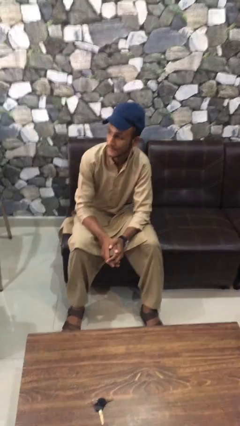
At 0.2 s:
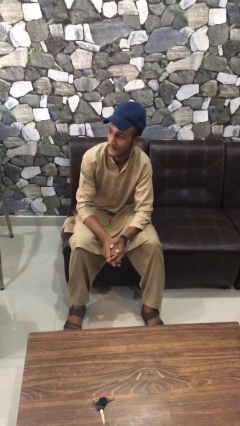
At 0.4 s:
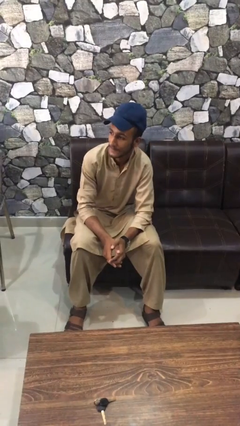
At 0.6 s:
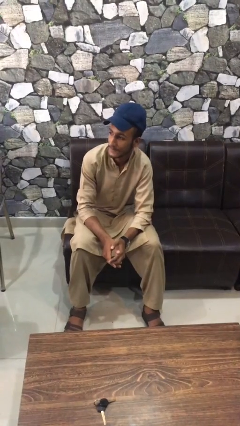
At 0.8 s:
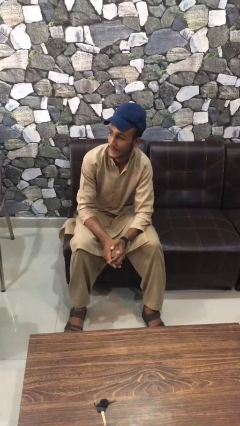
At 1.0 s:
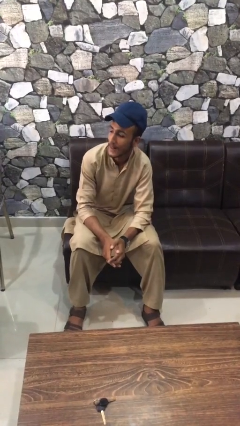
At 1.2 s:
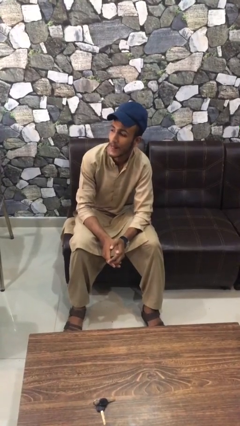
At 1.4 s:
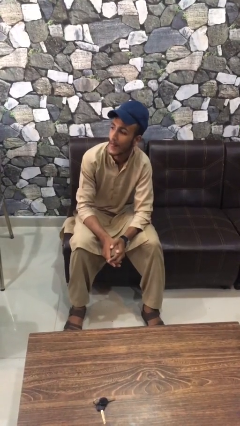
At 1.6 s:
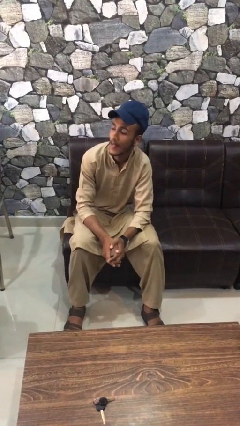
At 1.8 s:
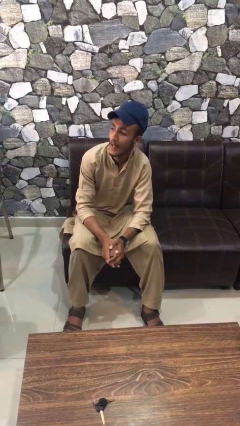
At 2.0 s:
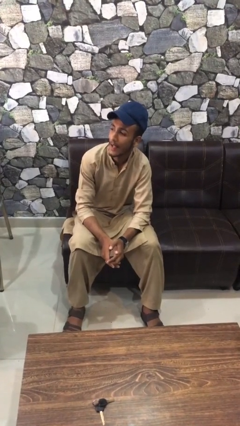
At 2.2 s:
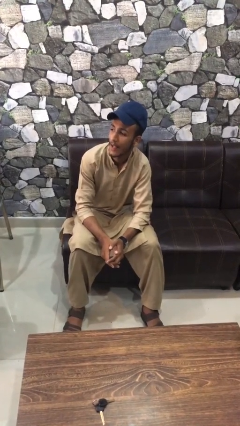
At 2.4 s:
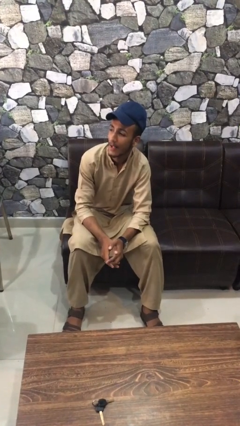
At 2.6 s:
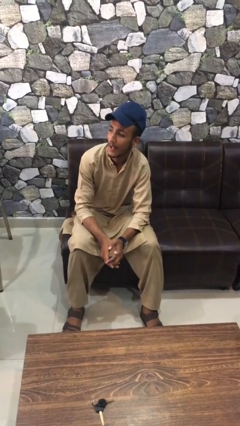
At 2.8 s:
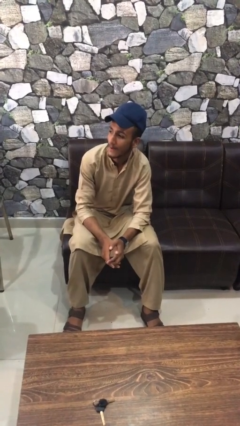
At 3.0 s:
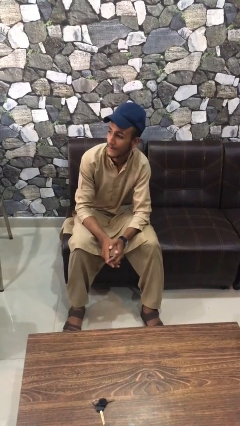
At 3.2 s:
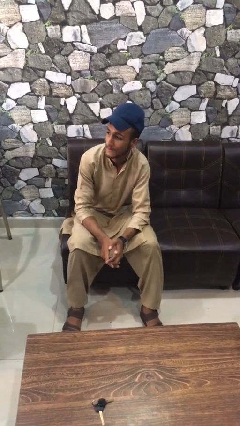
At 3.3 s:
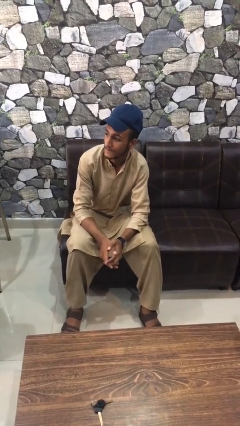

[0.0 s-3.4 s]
person sticks out tongue

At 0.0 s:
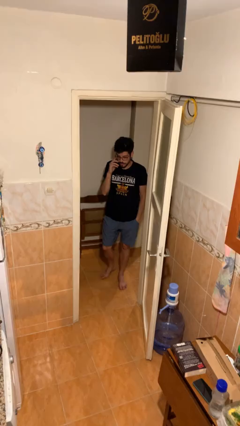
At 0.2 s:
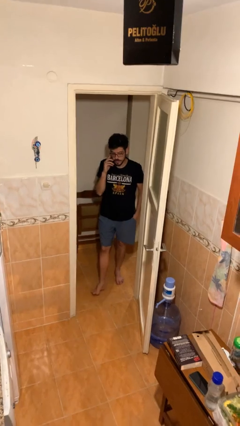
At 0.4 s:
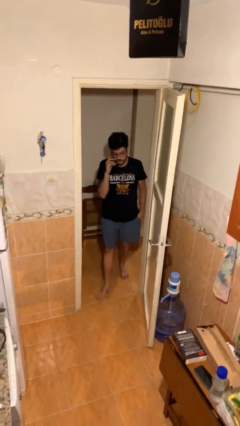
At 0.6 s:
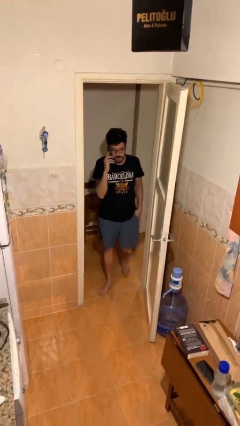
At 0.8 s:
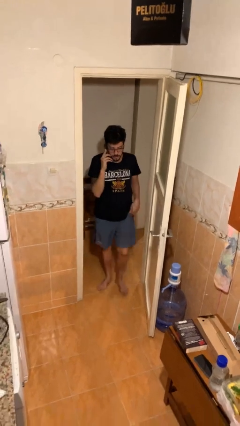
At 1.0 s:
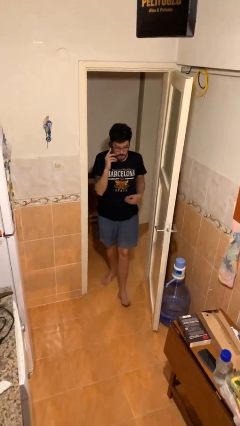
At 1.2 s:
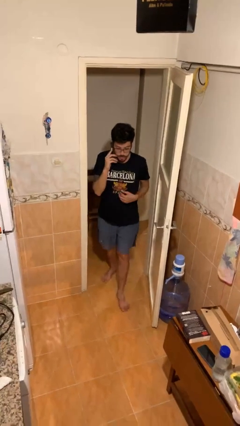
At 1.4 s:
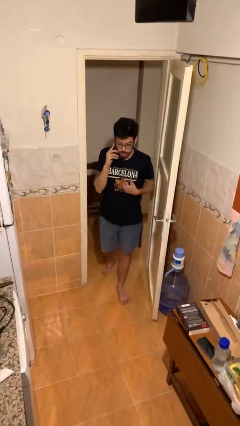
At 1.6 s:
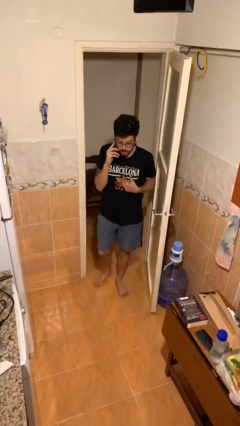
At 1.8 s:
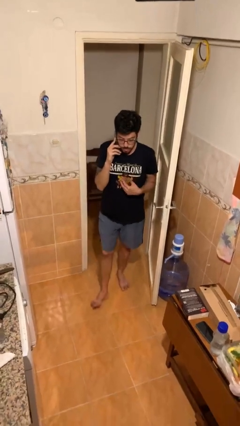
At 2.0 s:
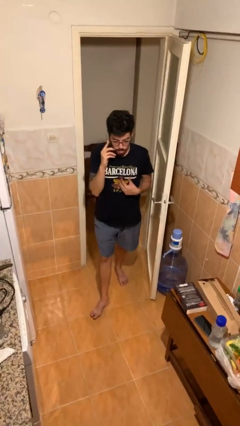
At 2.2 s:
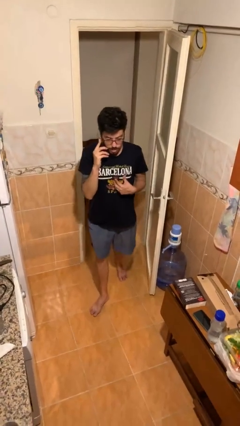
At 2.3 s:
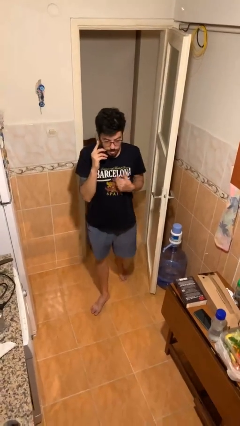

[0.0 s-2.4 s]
person enters scene through structure

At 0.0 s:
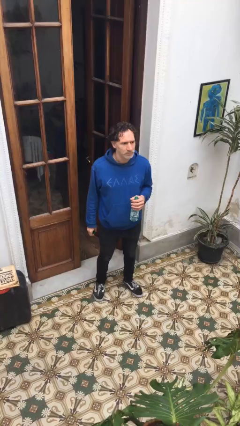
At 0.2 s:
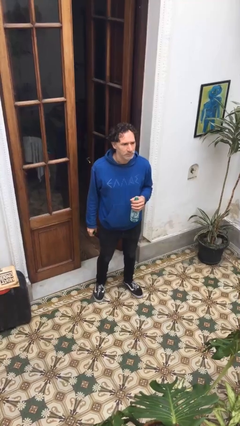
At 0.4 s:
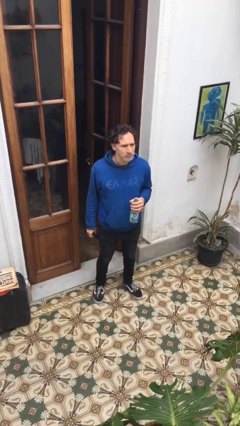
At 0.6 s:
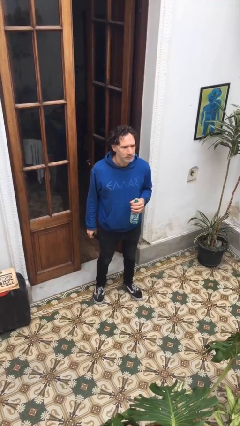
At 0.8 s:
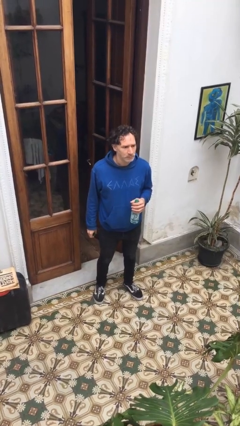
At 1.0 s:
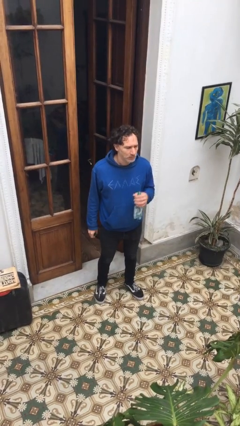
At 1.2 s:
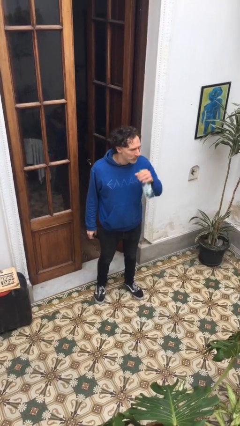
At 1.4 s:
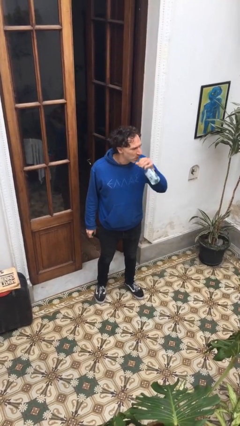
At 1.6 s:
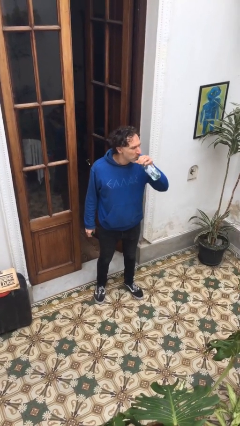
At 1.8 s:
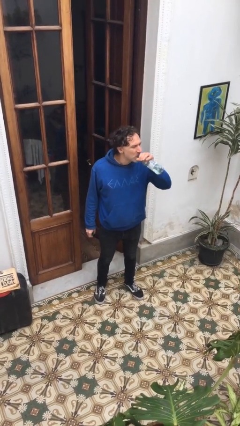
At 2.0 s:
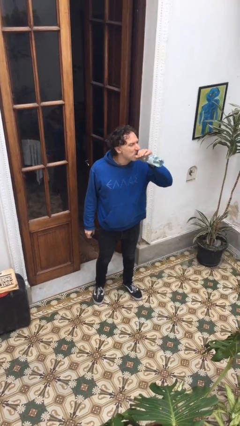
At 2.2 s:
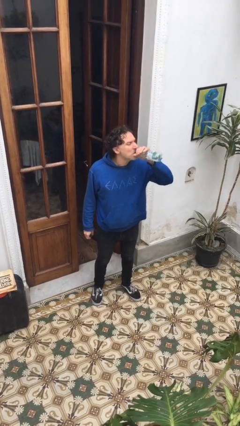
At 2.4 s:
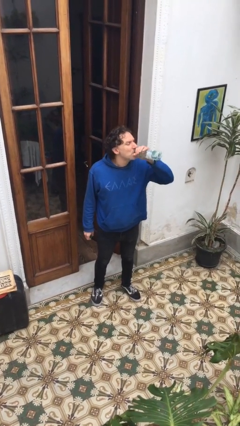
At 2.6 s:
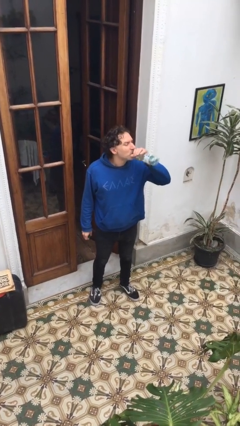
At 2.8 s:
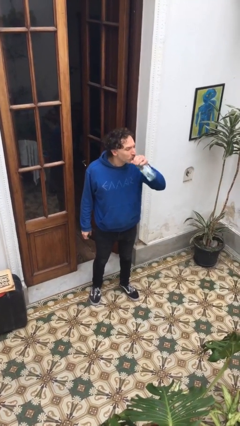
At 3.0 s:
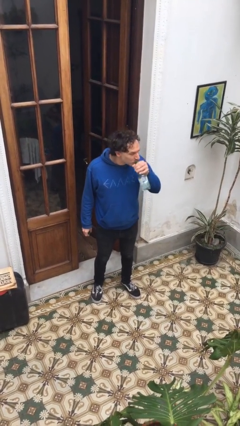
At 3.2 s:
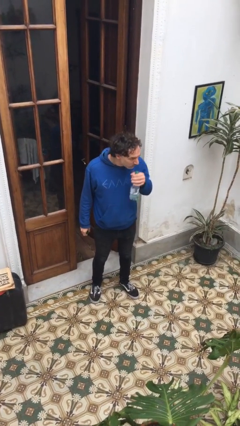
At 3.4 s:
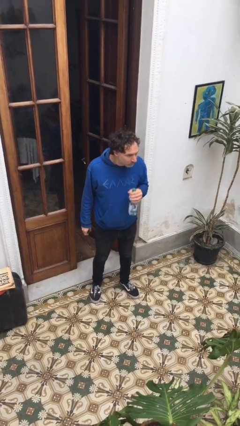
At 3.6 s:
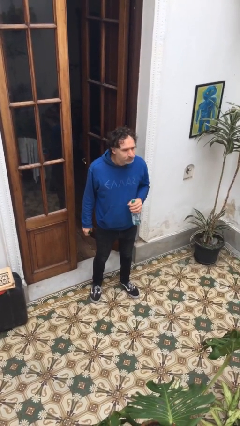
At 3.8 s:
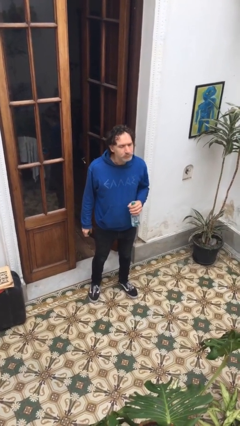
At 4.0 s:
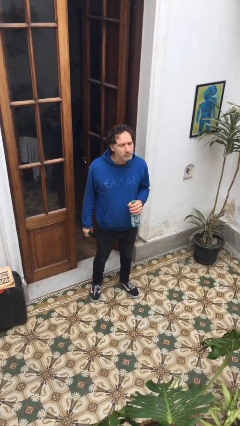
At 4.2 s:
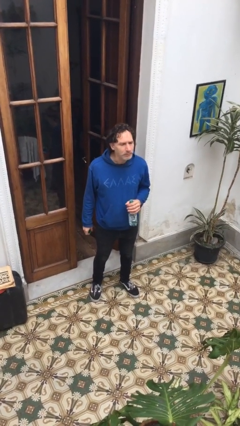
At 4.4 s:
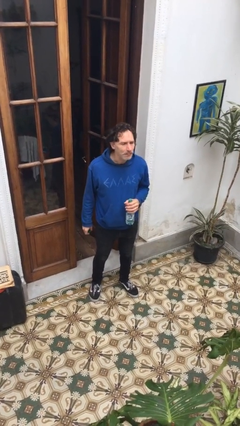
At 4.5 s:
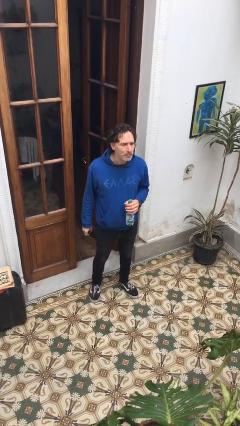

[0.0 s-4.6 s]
person drinks from bottle

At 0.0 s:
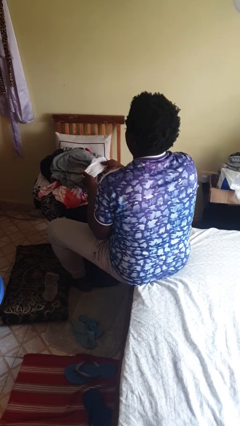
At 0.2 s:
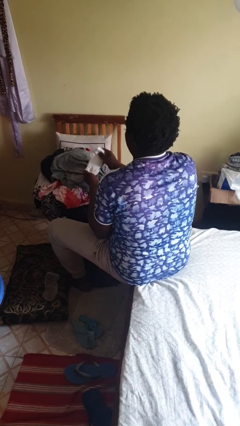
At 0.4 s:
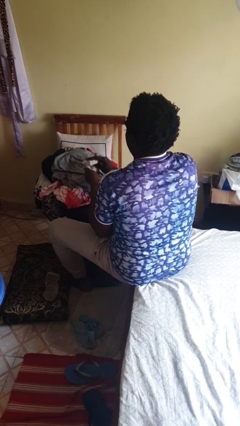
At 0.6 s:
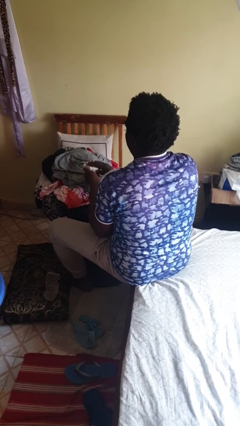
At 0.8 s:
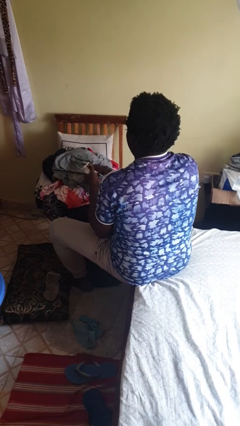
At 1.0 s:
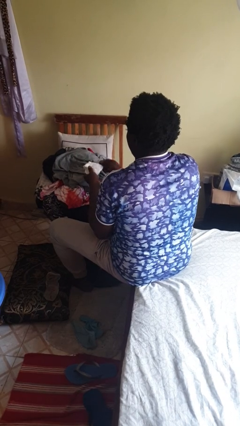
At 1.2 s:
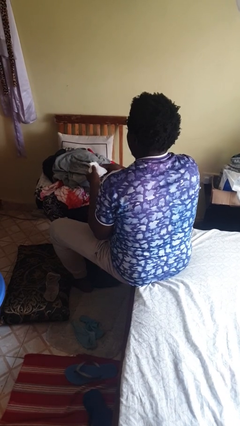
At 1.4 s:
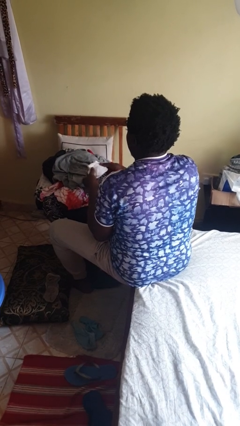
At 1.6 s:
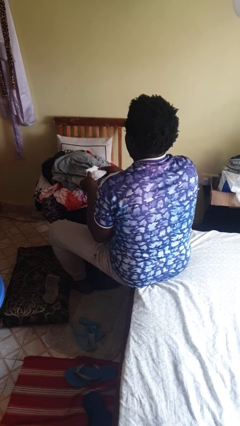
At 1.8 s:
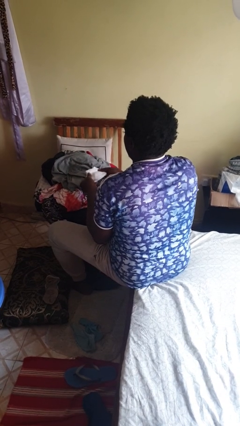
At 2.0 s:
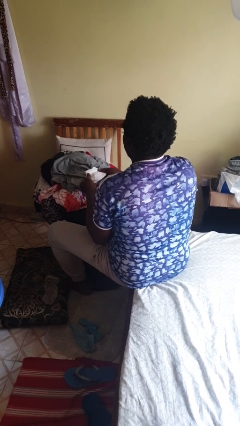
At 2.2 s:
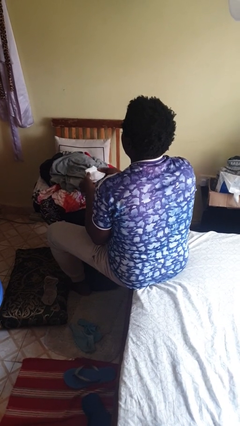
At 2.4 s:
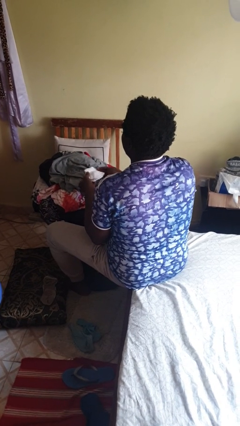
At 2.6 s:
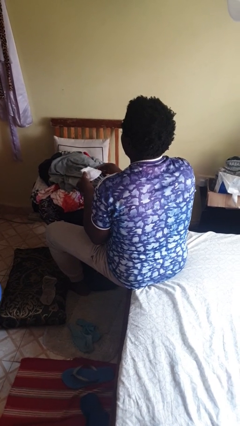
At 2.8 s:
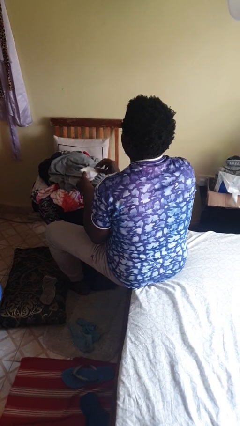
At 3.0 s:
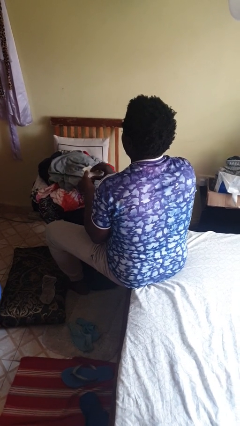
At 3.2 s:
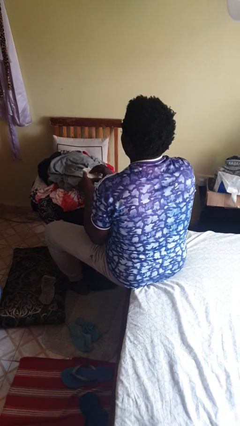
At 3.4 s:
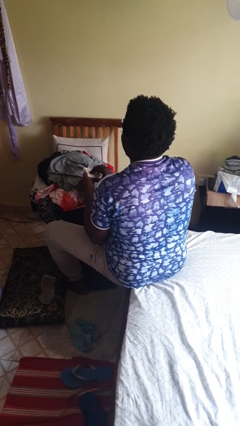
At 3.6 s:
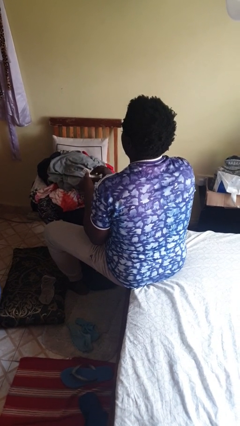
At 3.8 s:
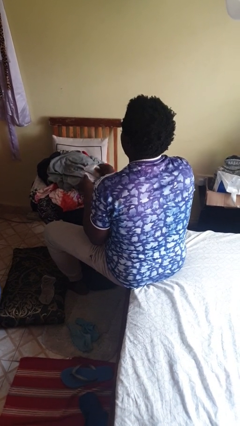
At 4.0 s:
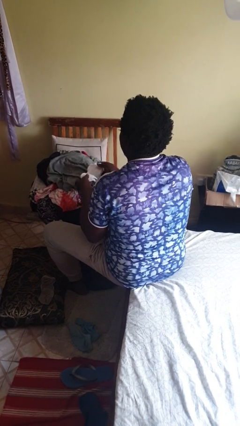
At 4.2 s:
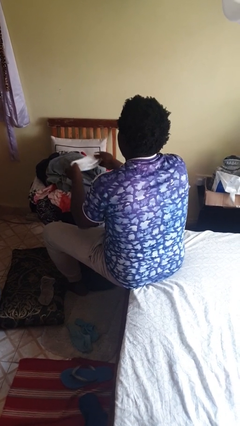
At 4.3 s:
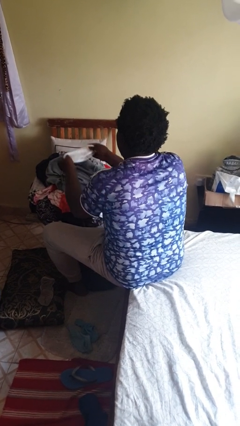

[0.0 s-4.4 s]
person folds socks

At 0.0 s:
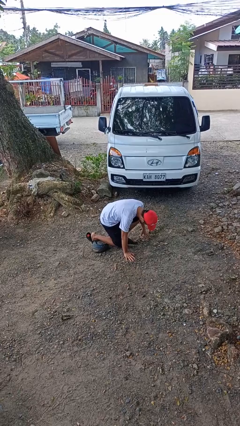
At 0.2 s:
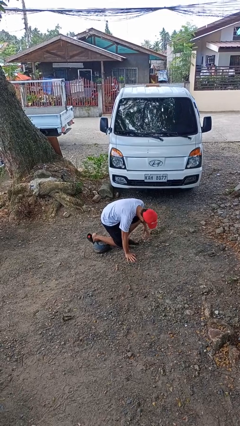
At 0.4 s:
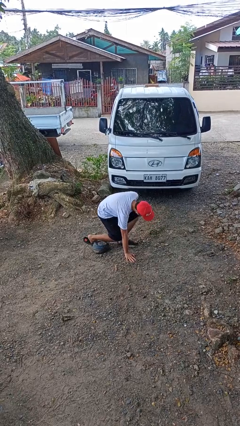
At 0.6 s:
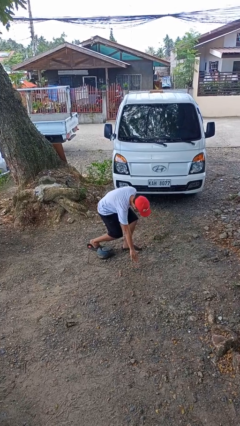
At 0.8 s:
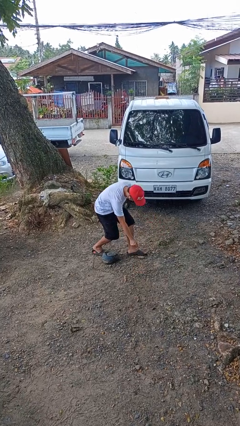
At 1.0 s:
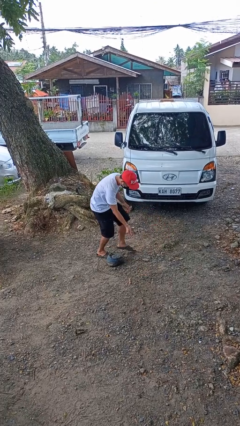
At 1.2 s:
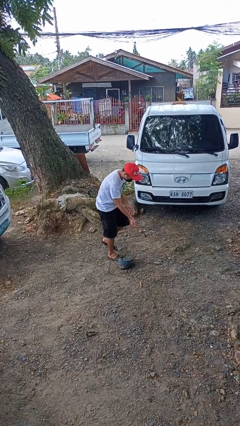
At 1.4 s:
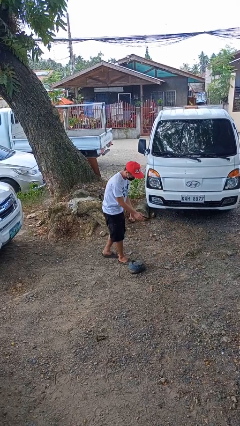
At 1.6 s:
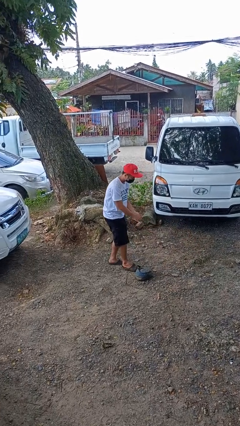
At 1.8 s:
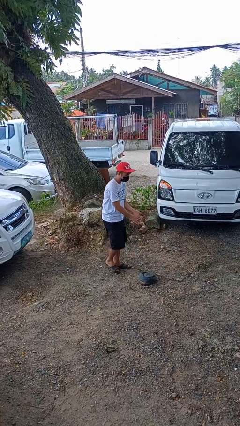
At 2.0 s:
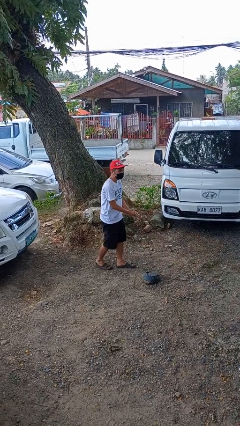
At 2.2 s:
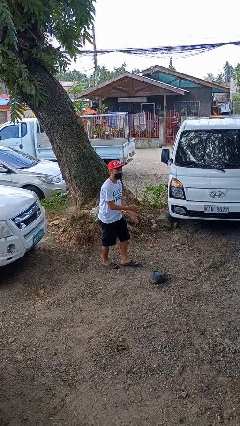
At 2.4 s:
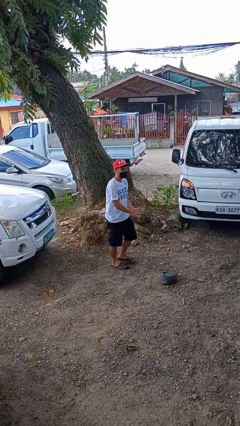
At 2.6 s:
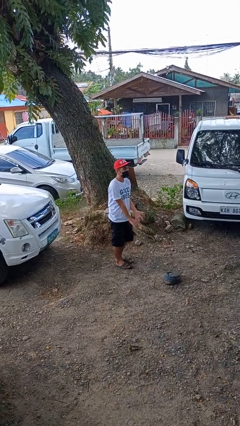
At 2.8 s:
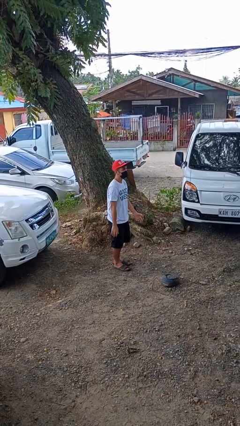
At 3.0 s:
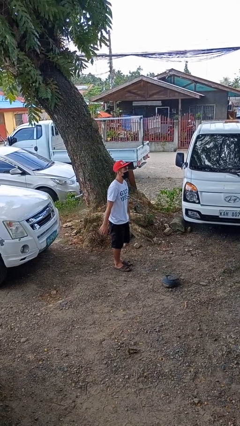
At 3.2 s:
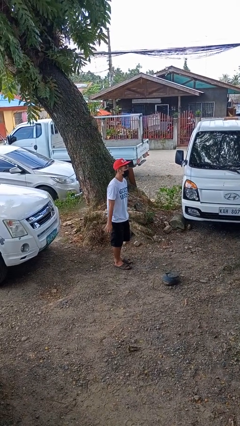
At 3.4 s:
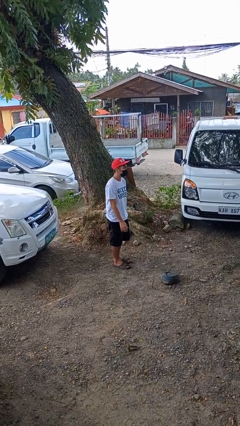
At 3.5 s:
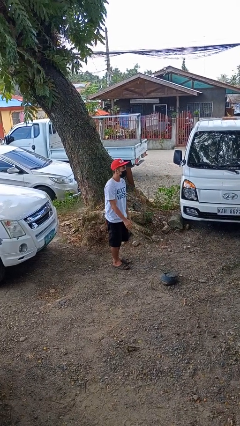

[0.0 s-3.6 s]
person stands up from floor
